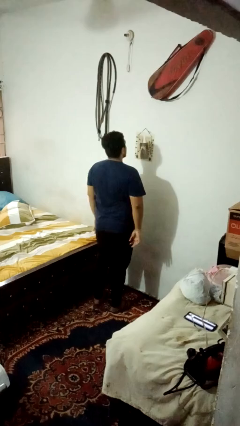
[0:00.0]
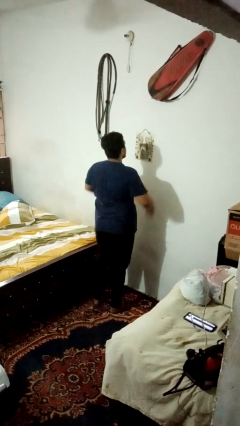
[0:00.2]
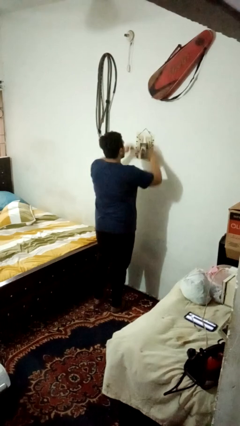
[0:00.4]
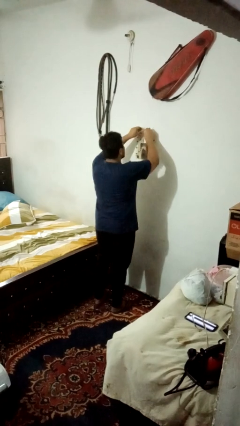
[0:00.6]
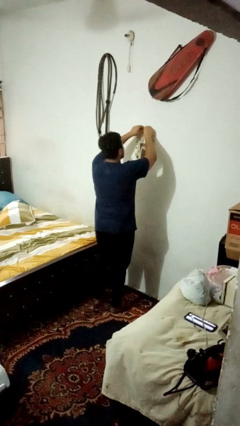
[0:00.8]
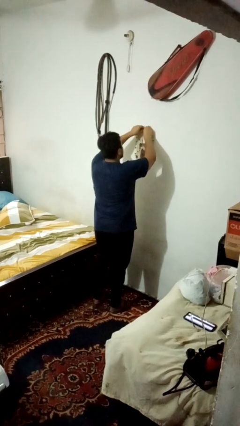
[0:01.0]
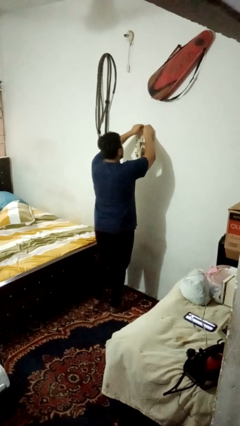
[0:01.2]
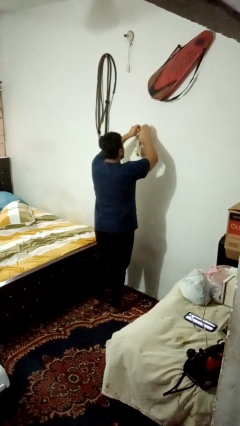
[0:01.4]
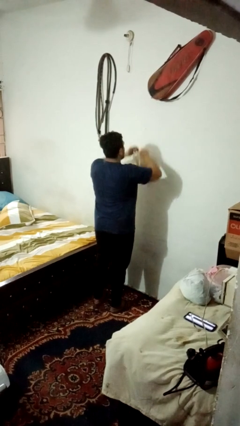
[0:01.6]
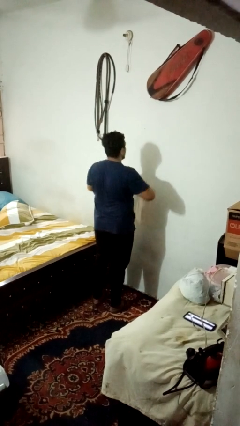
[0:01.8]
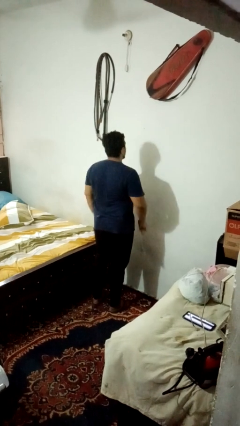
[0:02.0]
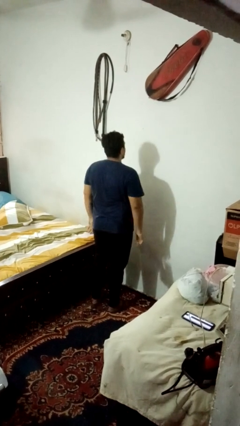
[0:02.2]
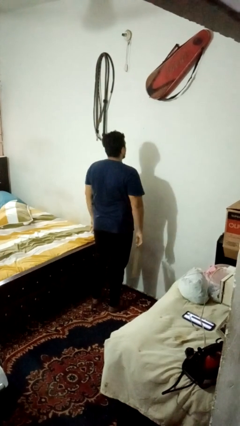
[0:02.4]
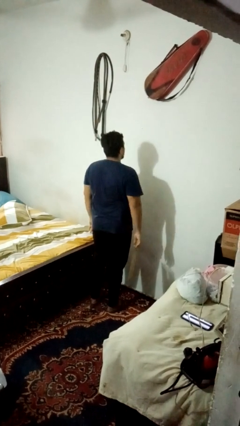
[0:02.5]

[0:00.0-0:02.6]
person takes down picture frame

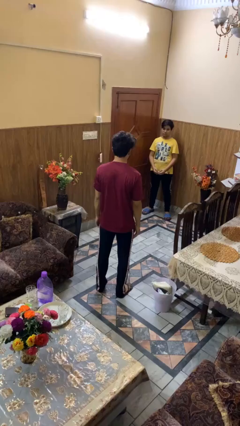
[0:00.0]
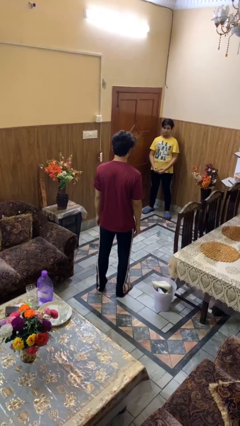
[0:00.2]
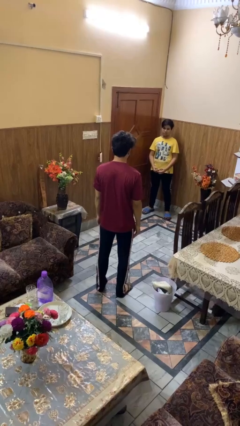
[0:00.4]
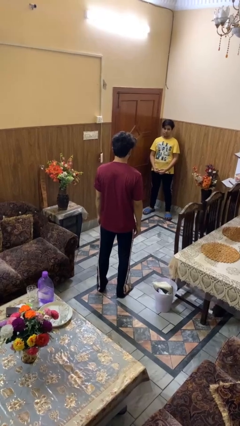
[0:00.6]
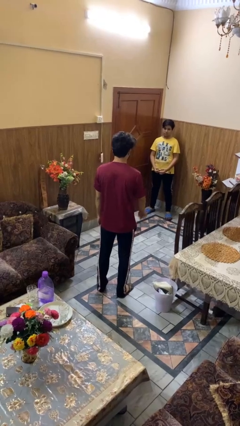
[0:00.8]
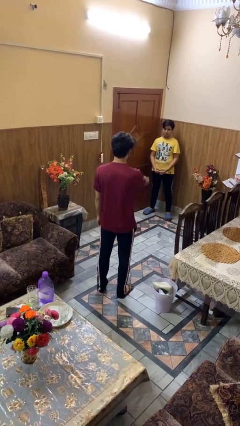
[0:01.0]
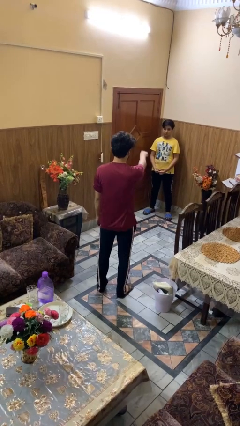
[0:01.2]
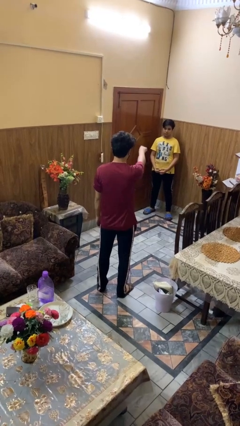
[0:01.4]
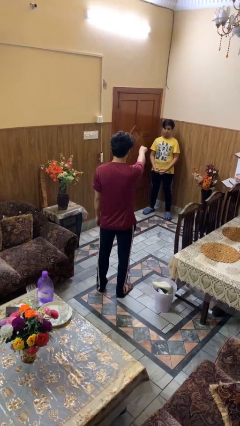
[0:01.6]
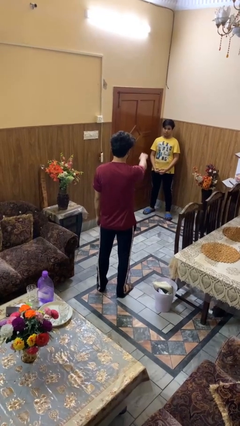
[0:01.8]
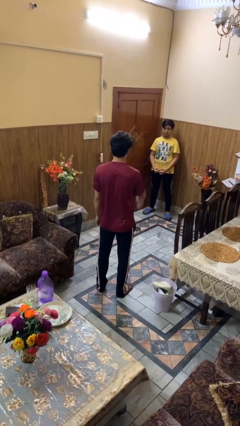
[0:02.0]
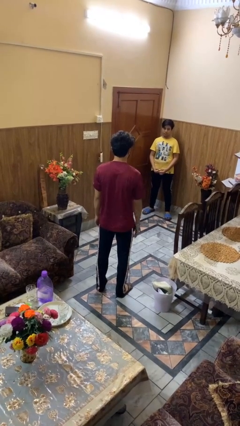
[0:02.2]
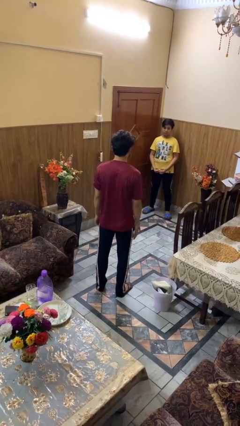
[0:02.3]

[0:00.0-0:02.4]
person points at person

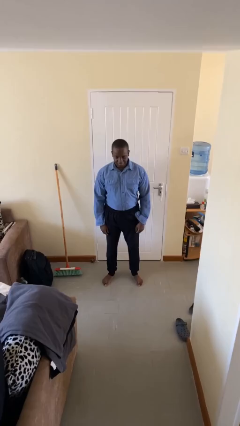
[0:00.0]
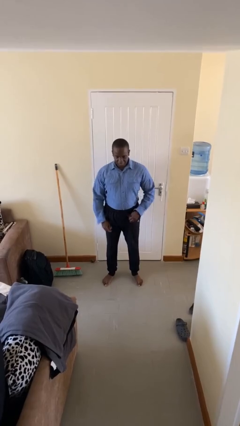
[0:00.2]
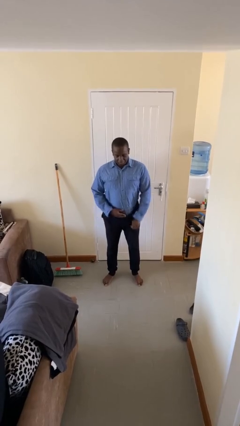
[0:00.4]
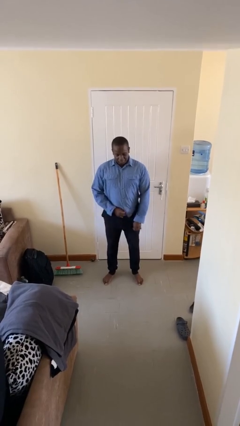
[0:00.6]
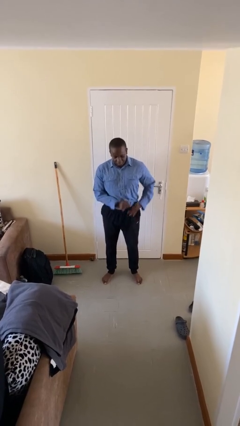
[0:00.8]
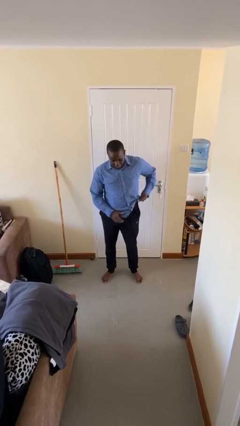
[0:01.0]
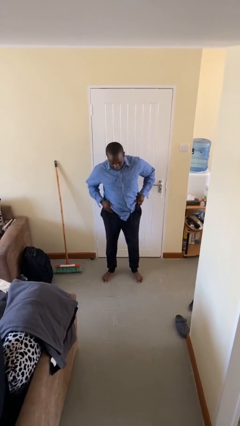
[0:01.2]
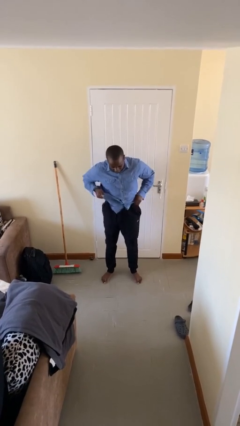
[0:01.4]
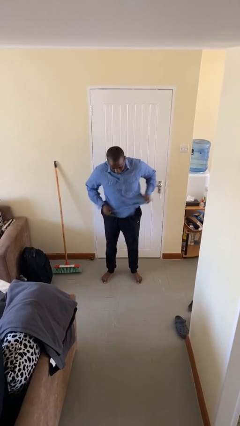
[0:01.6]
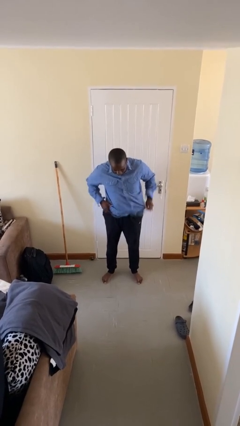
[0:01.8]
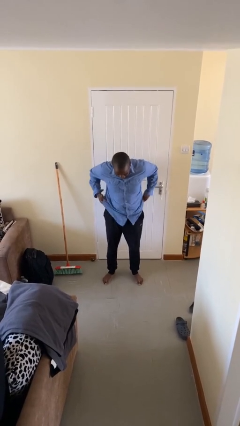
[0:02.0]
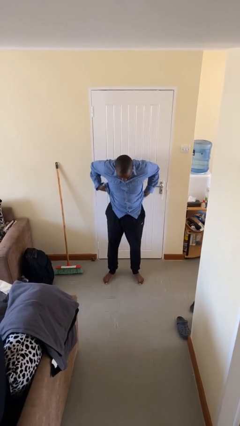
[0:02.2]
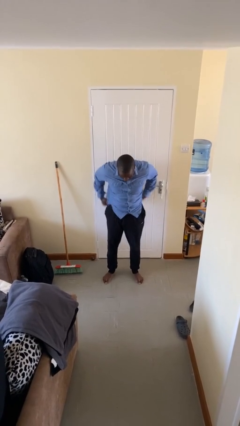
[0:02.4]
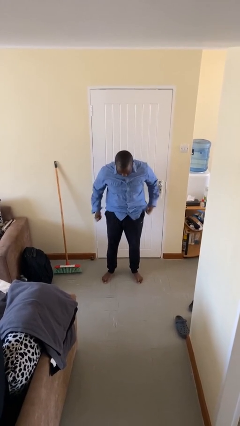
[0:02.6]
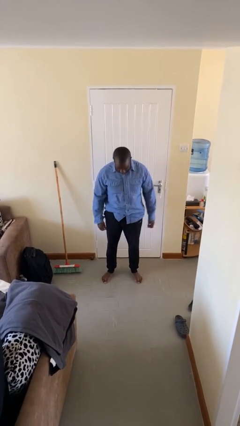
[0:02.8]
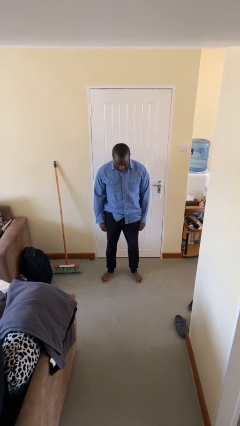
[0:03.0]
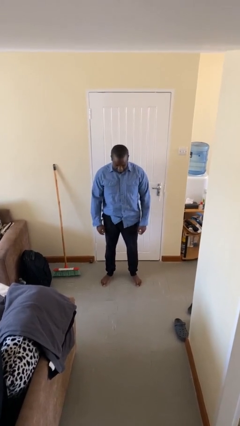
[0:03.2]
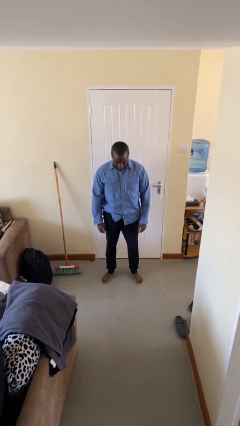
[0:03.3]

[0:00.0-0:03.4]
person untucks shirt

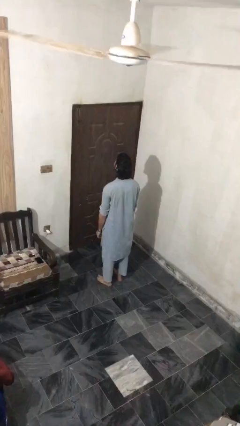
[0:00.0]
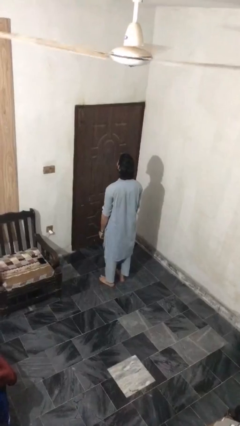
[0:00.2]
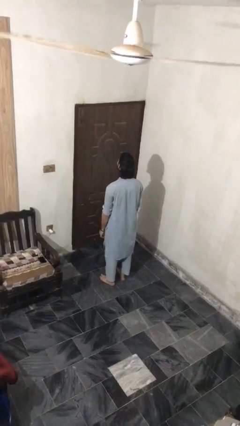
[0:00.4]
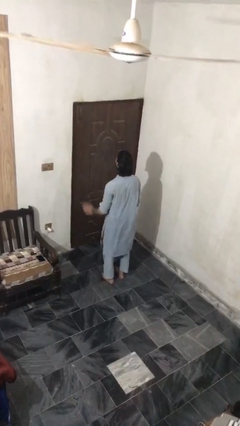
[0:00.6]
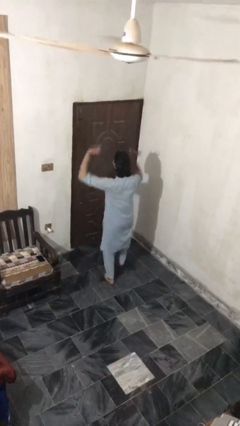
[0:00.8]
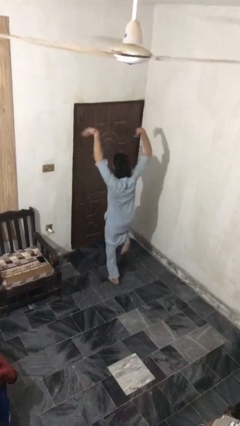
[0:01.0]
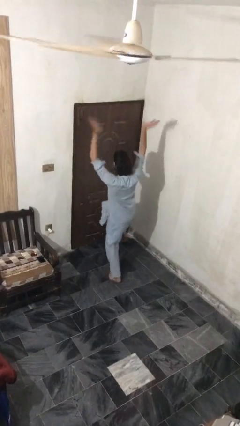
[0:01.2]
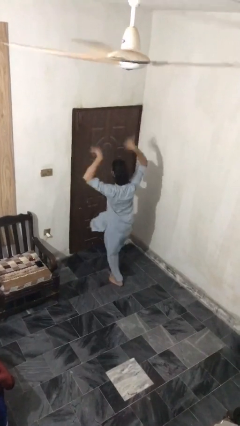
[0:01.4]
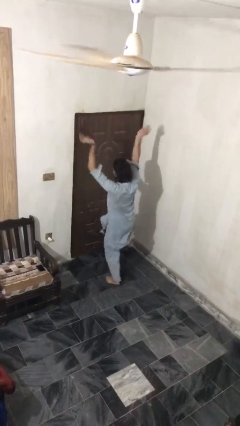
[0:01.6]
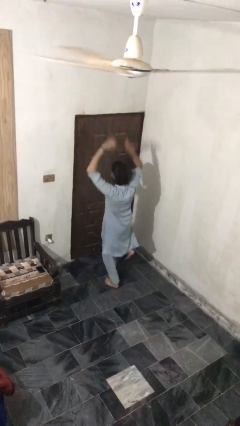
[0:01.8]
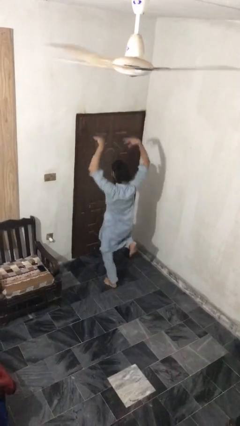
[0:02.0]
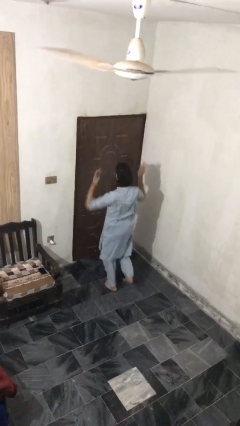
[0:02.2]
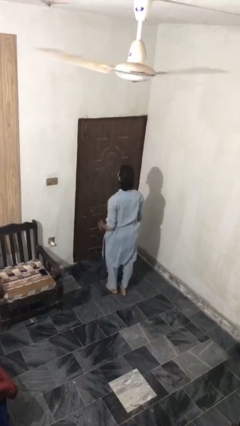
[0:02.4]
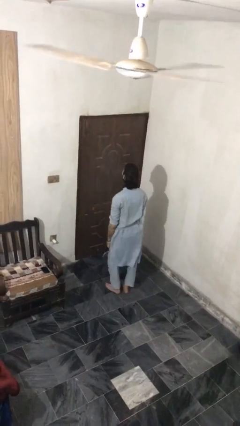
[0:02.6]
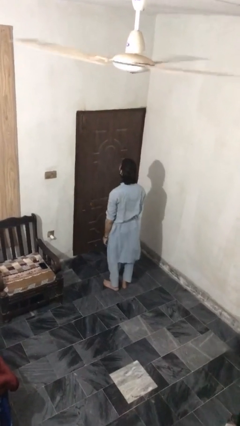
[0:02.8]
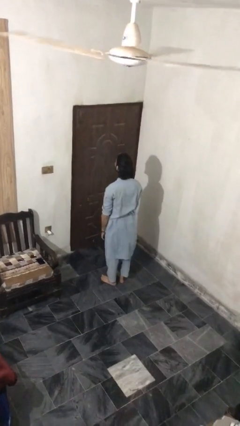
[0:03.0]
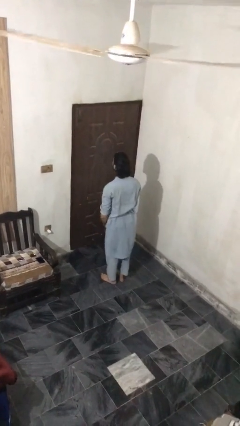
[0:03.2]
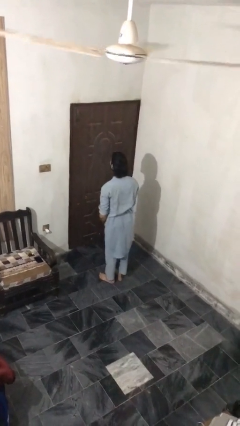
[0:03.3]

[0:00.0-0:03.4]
person dances in place

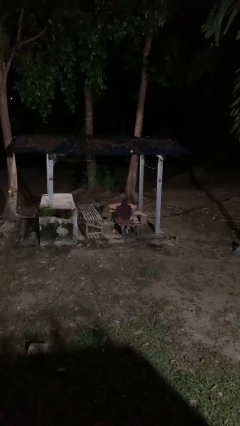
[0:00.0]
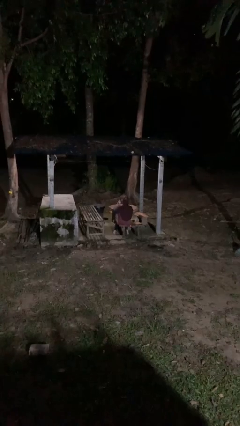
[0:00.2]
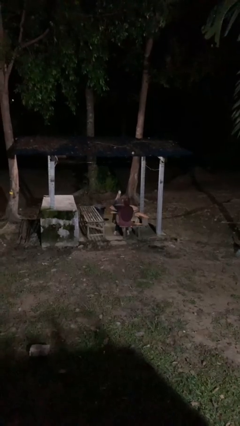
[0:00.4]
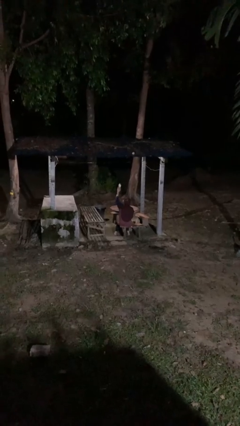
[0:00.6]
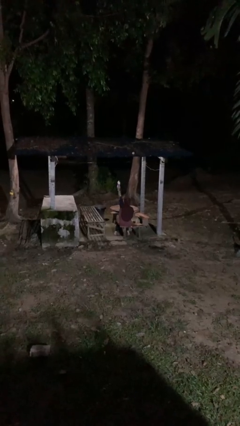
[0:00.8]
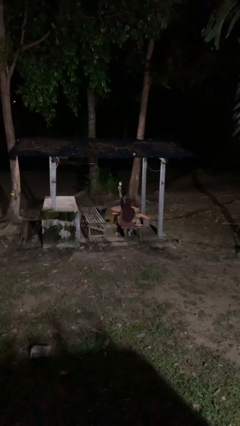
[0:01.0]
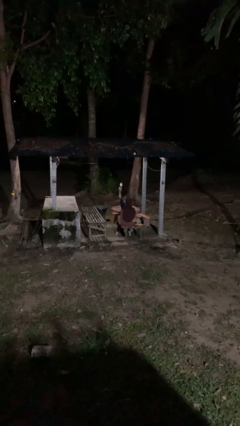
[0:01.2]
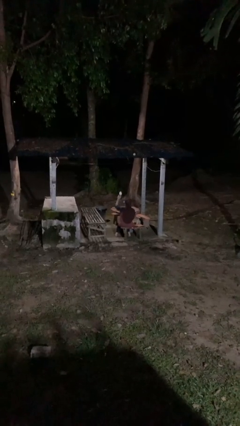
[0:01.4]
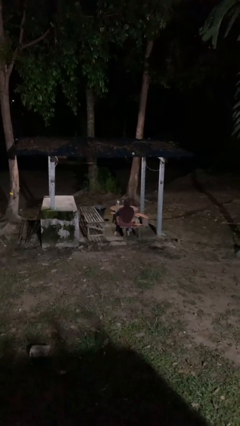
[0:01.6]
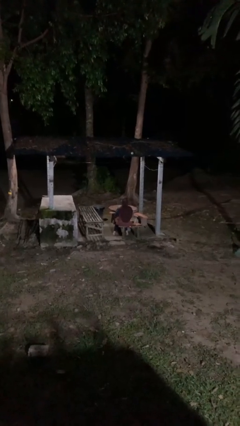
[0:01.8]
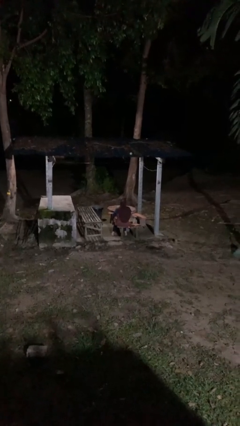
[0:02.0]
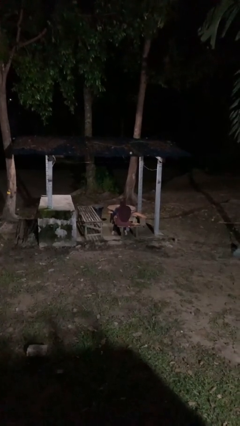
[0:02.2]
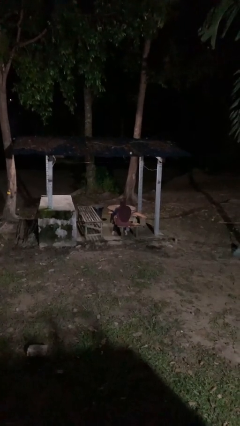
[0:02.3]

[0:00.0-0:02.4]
person holds object above head

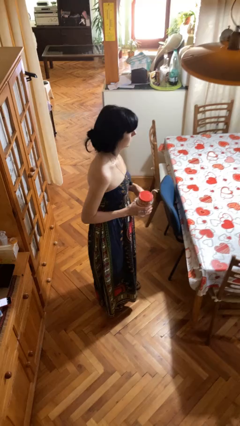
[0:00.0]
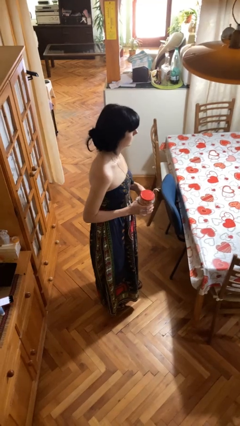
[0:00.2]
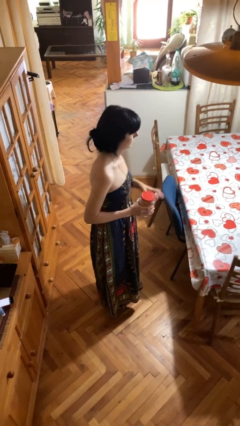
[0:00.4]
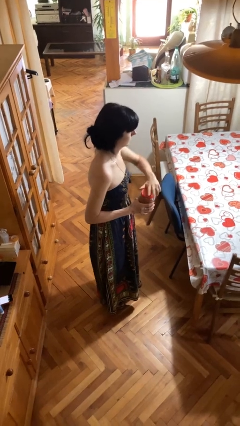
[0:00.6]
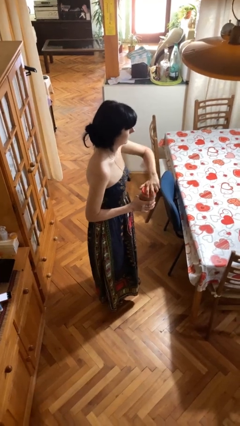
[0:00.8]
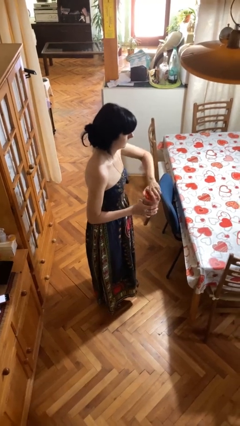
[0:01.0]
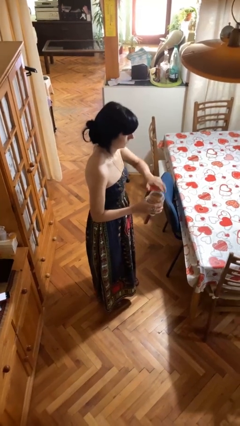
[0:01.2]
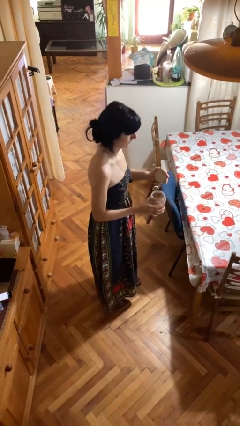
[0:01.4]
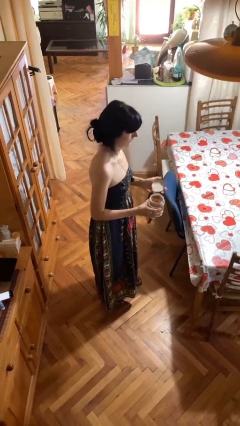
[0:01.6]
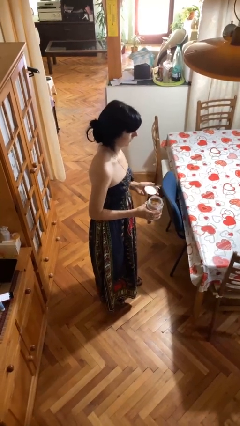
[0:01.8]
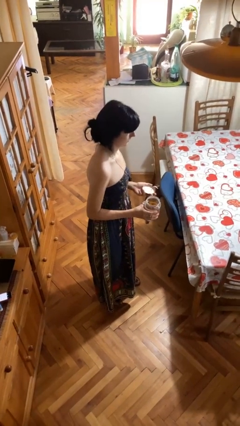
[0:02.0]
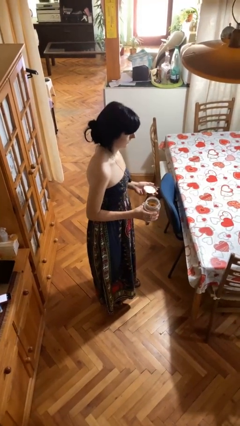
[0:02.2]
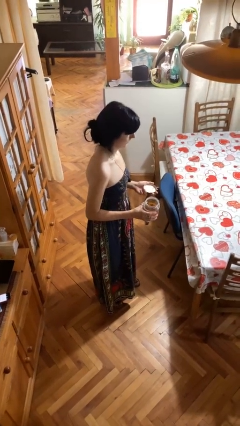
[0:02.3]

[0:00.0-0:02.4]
person opens jar

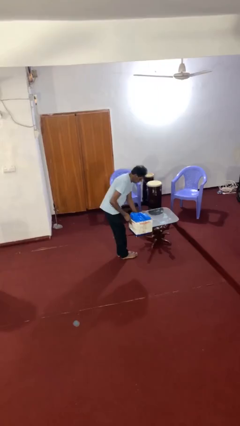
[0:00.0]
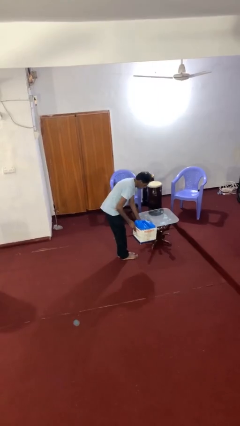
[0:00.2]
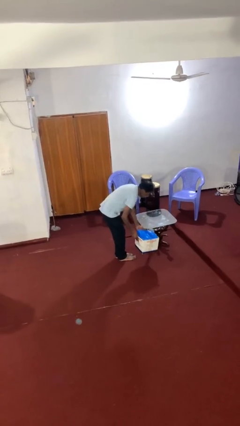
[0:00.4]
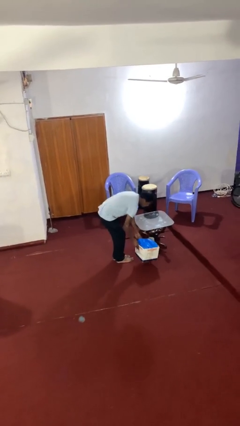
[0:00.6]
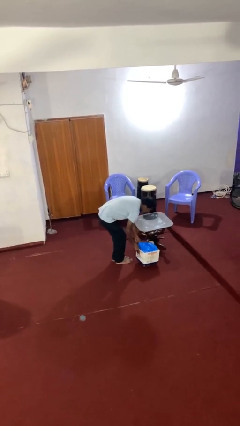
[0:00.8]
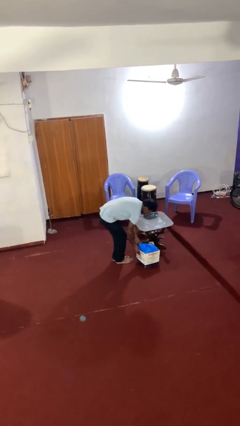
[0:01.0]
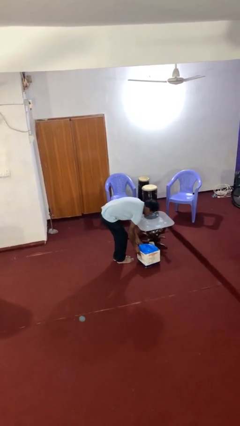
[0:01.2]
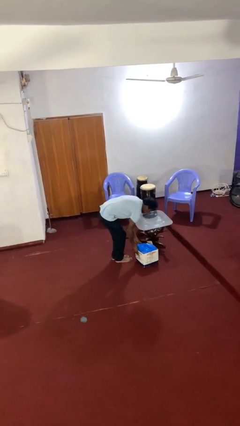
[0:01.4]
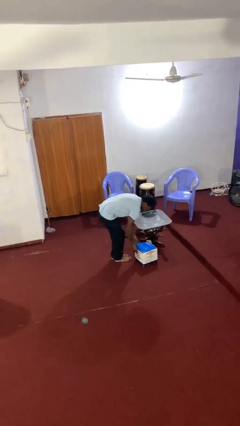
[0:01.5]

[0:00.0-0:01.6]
person puts down object on floor
